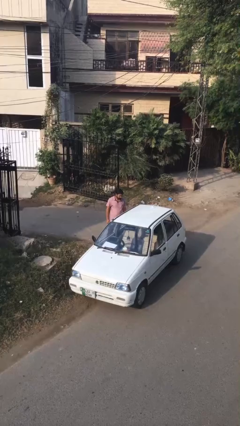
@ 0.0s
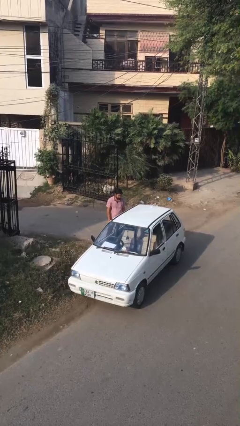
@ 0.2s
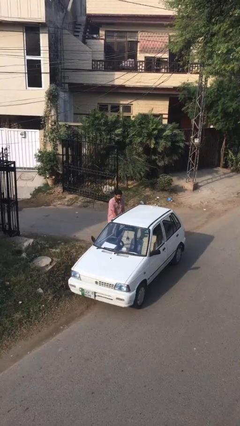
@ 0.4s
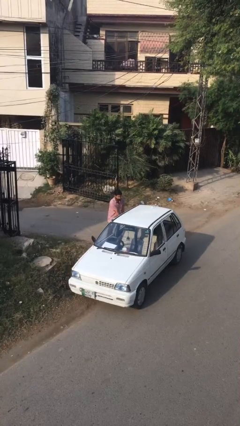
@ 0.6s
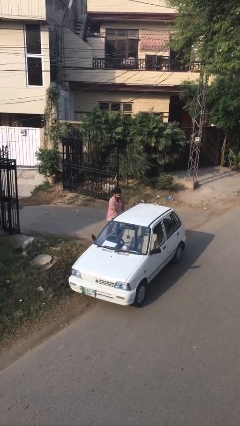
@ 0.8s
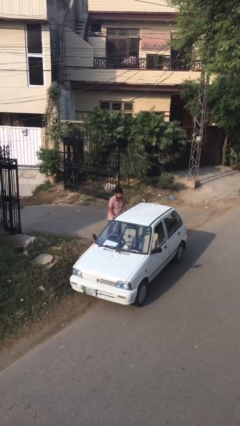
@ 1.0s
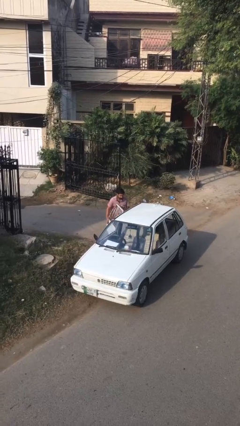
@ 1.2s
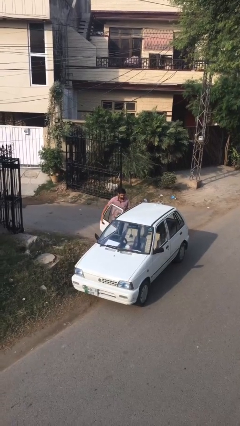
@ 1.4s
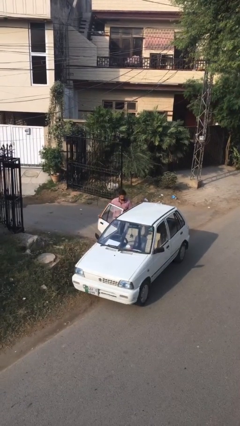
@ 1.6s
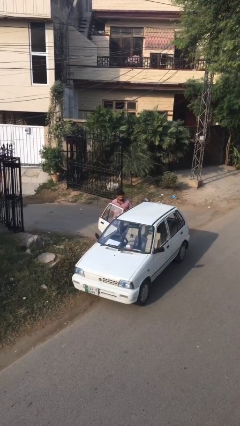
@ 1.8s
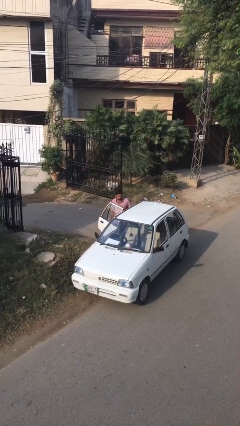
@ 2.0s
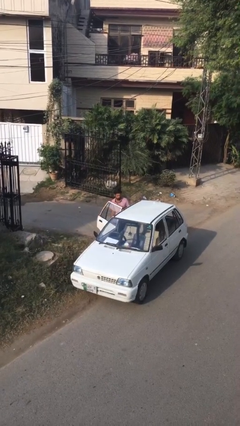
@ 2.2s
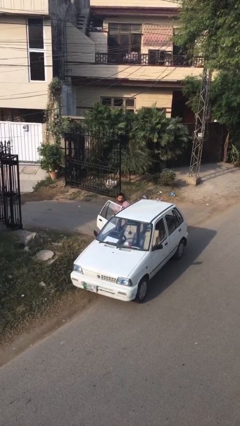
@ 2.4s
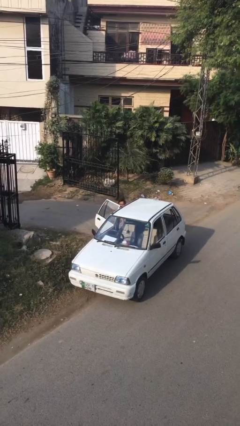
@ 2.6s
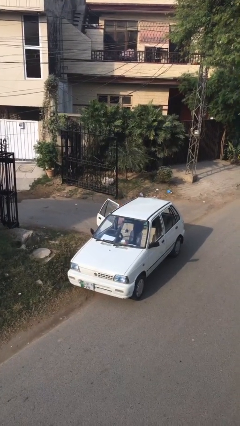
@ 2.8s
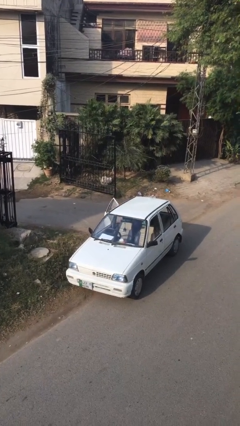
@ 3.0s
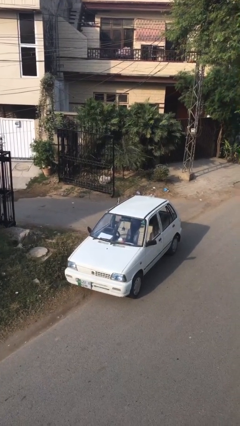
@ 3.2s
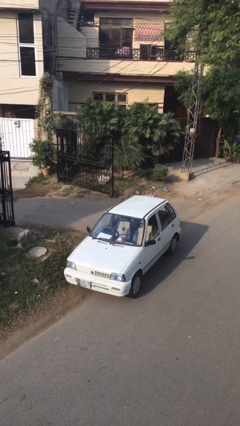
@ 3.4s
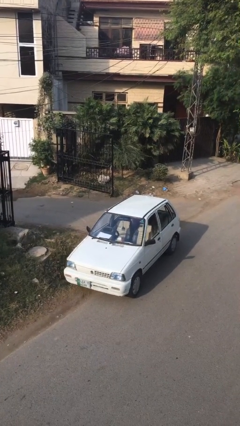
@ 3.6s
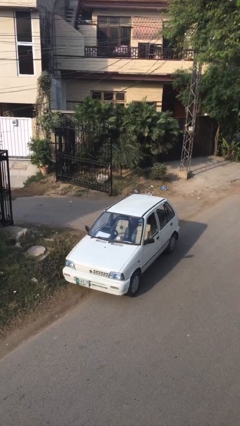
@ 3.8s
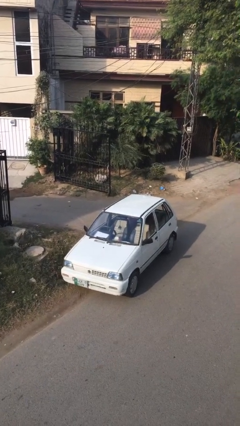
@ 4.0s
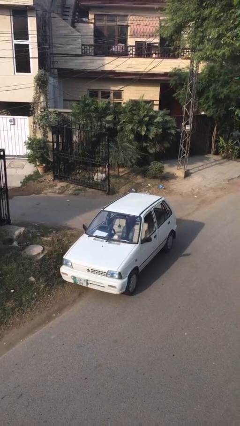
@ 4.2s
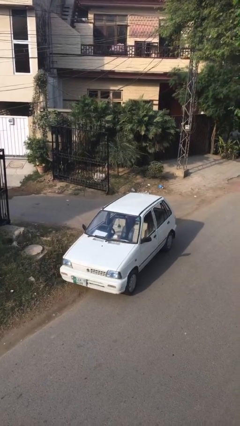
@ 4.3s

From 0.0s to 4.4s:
person enters car

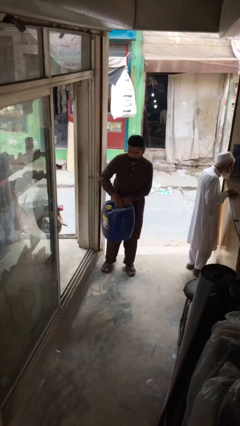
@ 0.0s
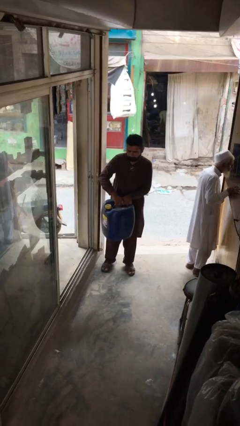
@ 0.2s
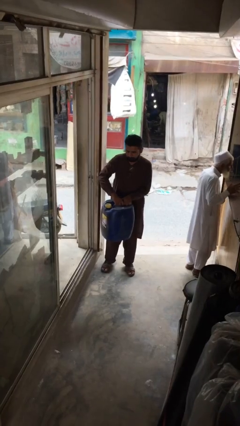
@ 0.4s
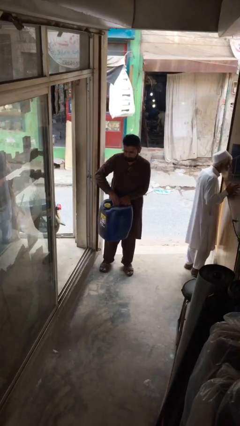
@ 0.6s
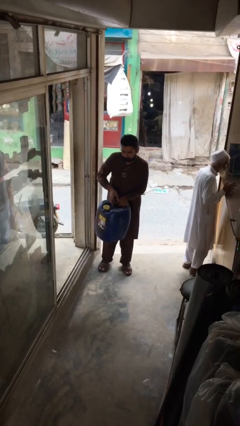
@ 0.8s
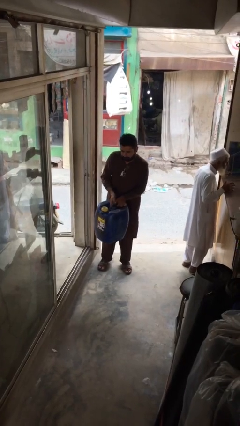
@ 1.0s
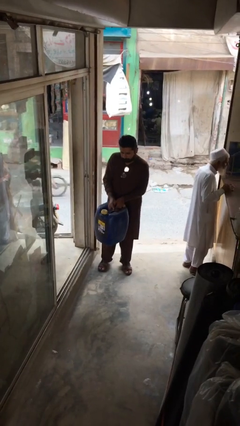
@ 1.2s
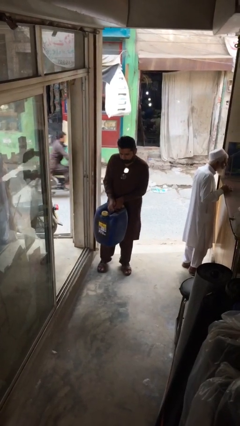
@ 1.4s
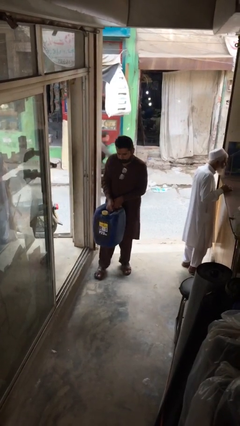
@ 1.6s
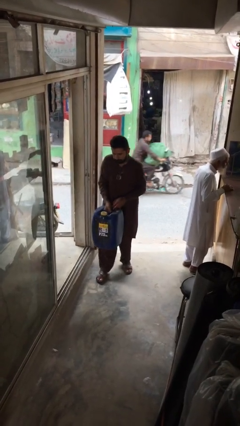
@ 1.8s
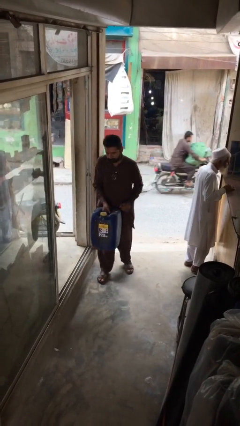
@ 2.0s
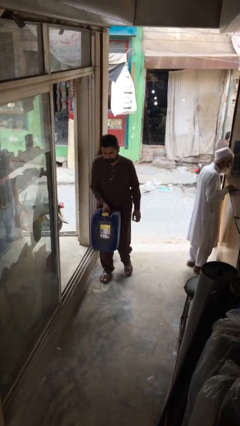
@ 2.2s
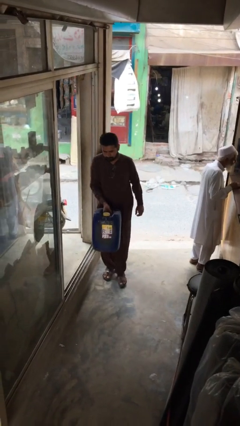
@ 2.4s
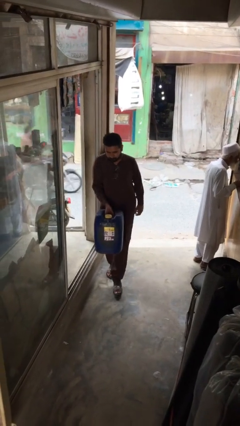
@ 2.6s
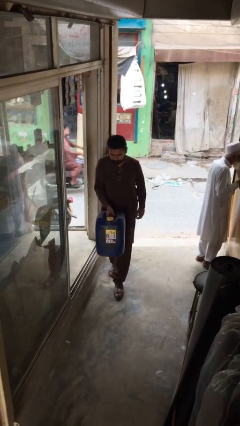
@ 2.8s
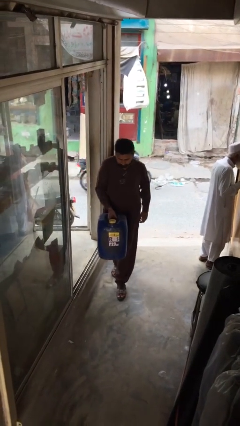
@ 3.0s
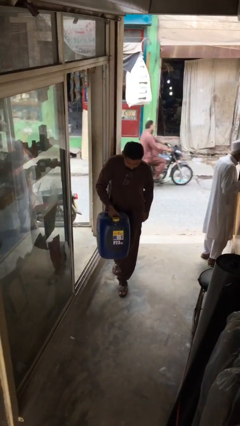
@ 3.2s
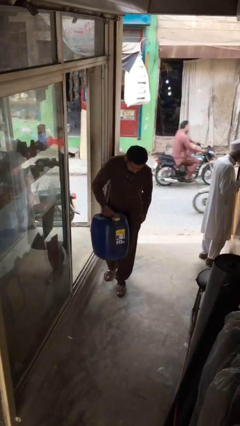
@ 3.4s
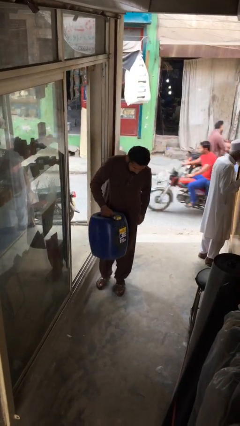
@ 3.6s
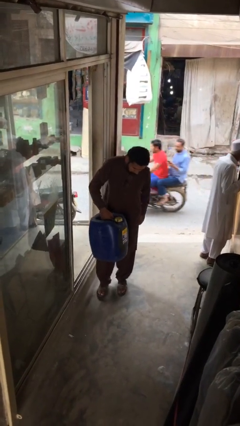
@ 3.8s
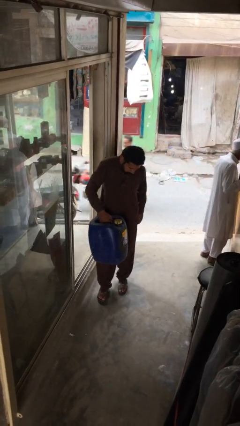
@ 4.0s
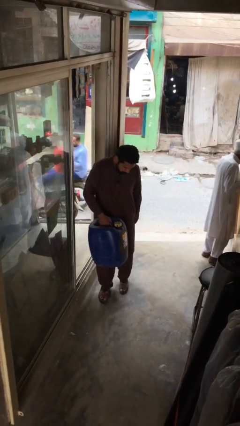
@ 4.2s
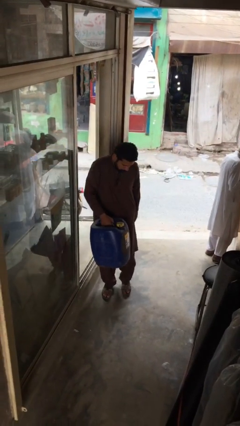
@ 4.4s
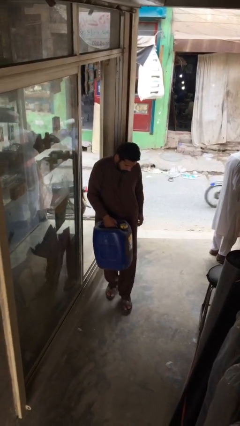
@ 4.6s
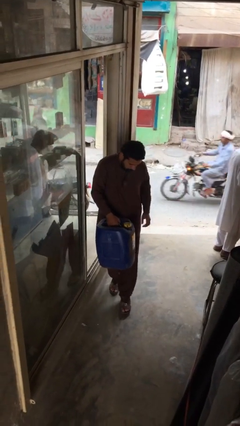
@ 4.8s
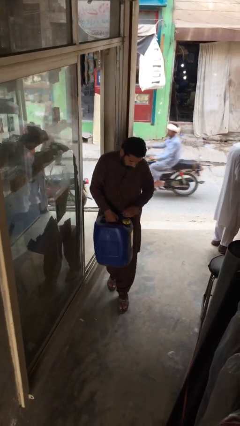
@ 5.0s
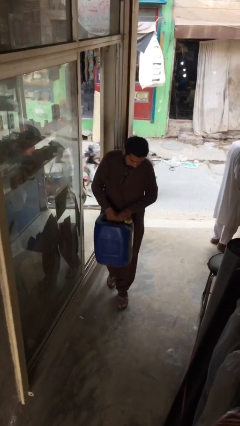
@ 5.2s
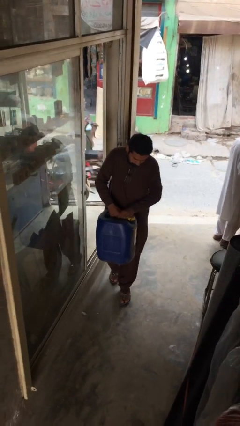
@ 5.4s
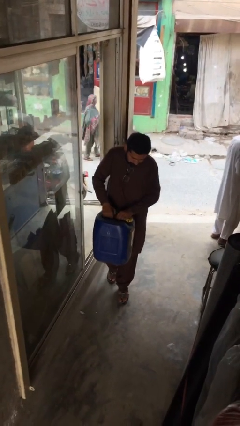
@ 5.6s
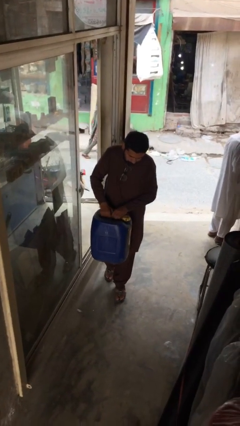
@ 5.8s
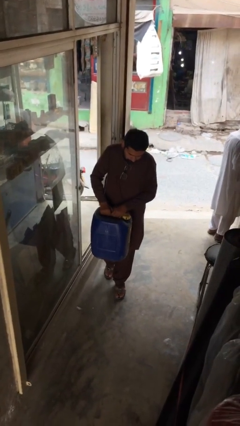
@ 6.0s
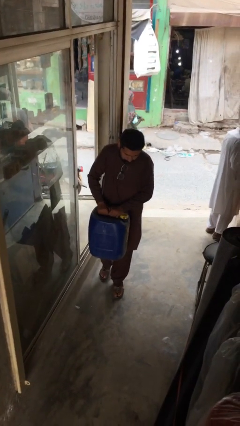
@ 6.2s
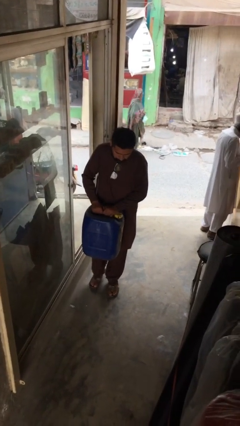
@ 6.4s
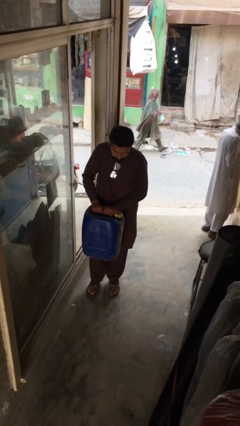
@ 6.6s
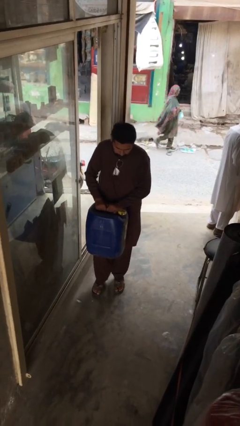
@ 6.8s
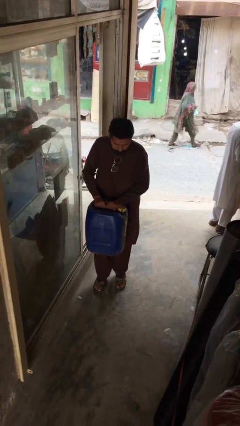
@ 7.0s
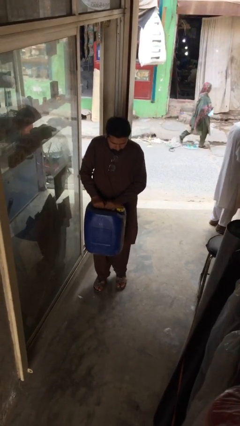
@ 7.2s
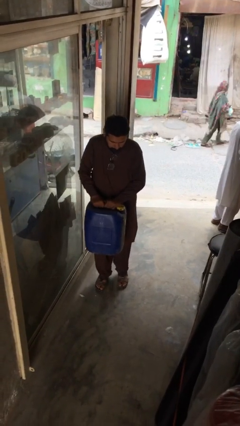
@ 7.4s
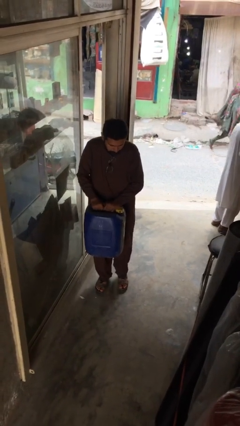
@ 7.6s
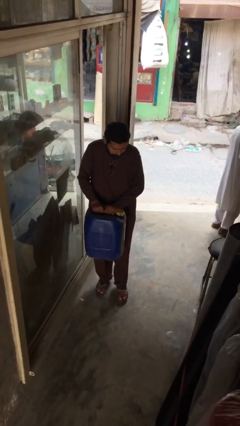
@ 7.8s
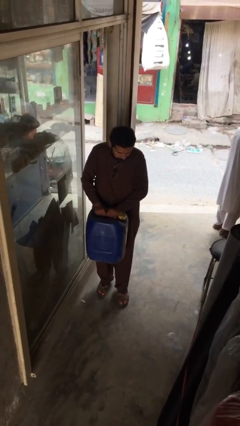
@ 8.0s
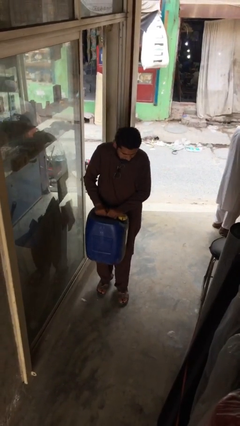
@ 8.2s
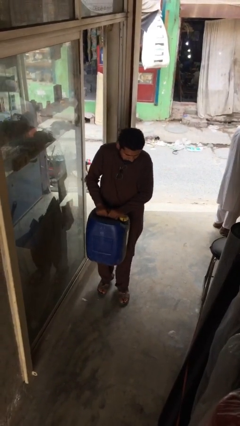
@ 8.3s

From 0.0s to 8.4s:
person carries heavy object

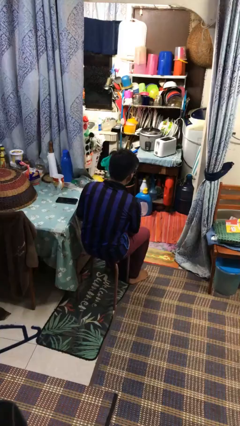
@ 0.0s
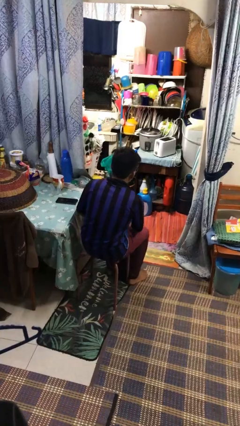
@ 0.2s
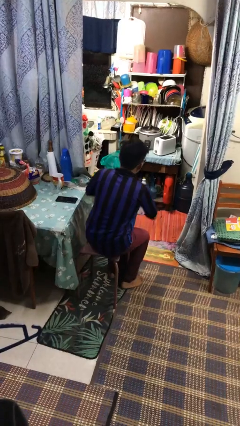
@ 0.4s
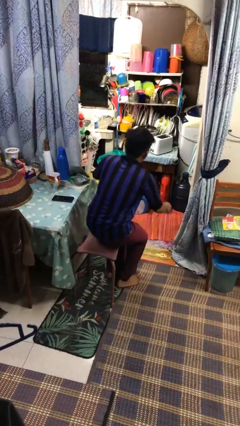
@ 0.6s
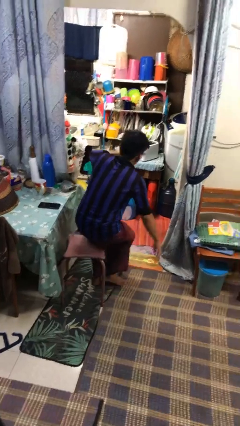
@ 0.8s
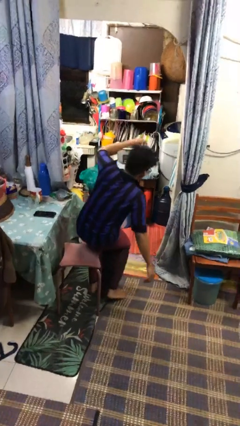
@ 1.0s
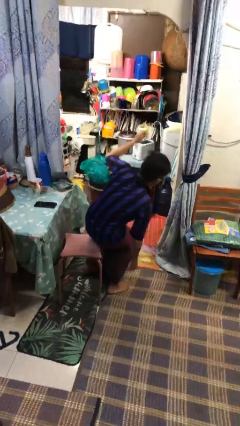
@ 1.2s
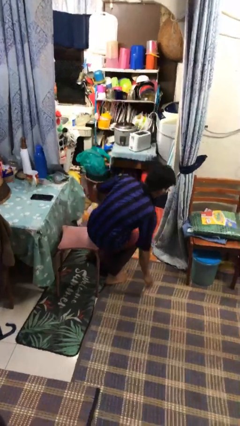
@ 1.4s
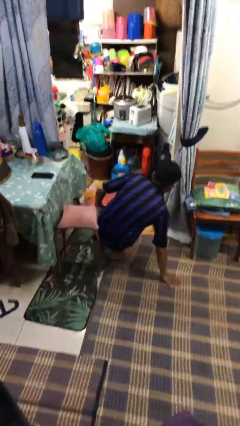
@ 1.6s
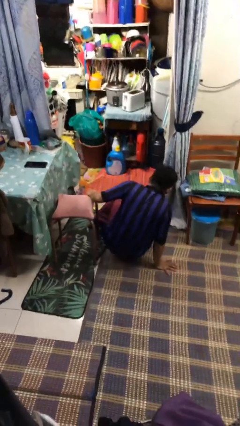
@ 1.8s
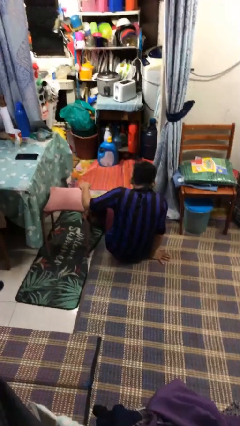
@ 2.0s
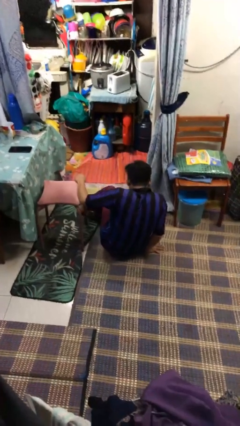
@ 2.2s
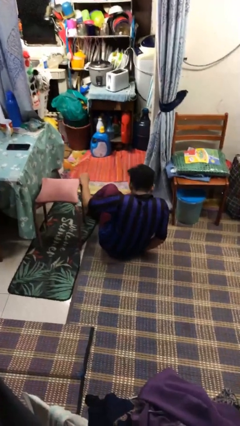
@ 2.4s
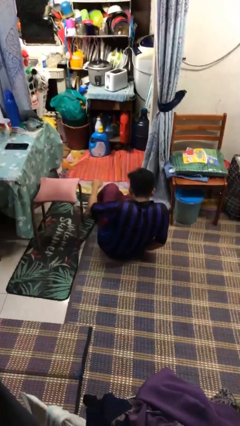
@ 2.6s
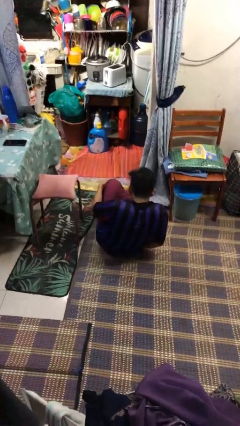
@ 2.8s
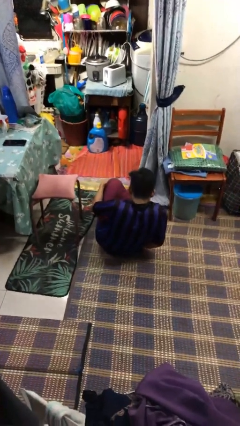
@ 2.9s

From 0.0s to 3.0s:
person falls from chair

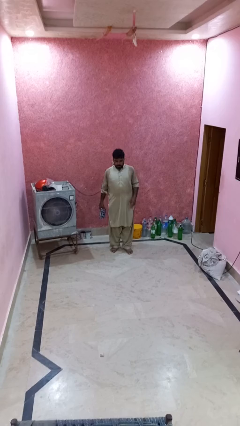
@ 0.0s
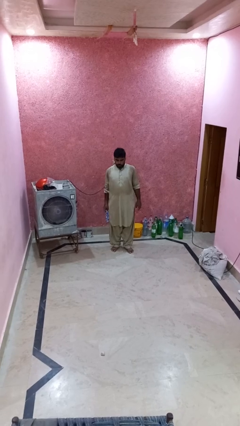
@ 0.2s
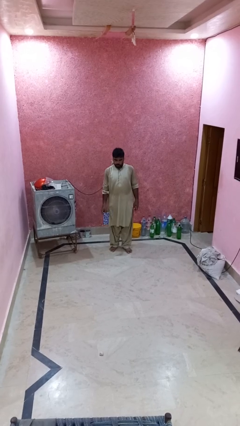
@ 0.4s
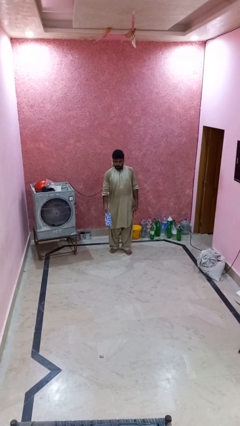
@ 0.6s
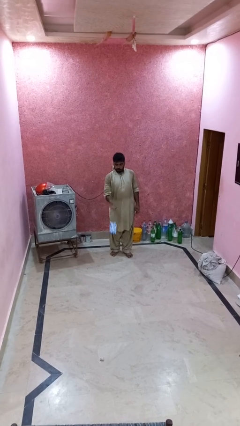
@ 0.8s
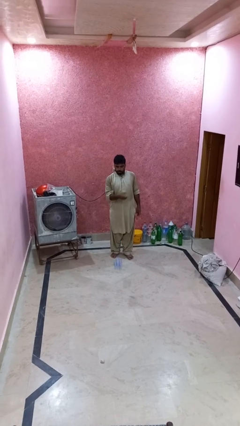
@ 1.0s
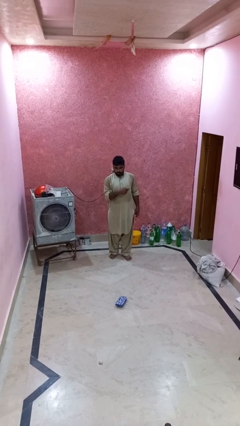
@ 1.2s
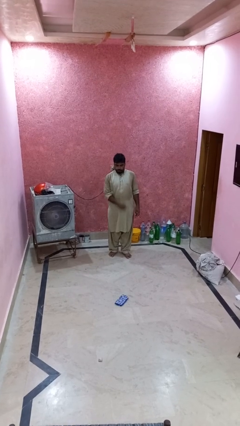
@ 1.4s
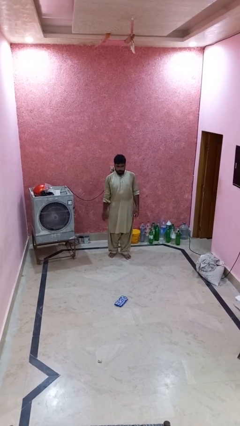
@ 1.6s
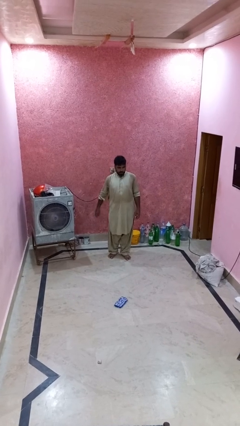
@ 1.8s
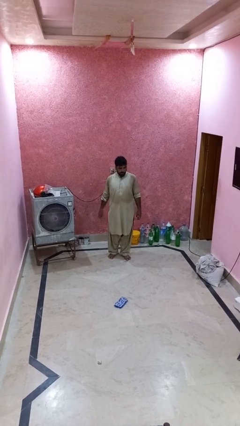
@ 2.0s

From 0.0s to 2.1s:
person throws object to ground
